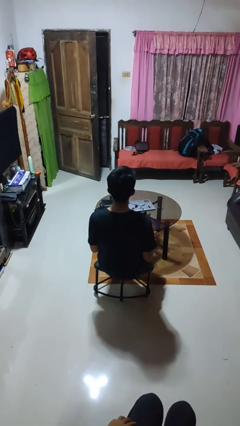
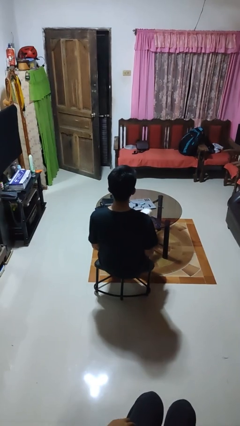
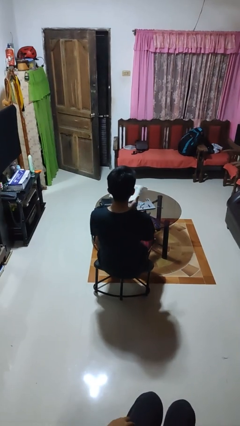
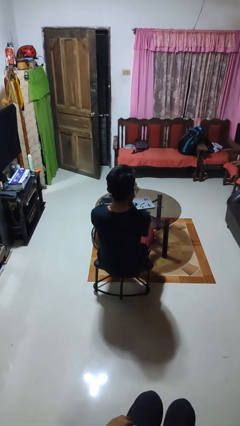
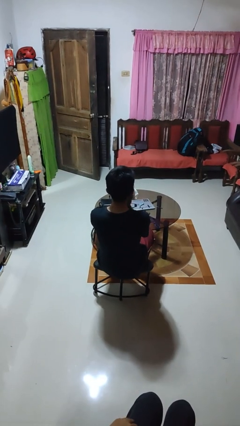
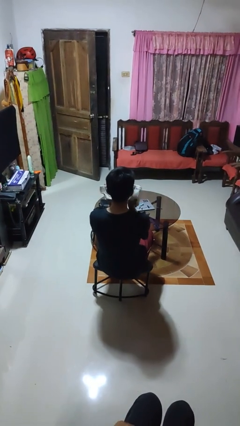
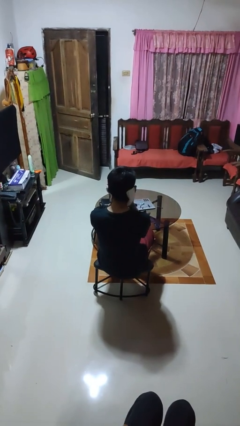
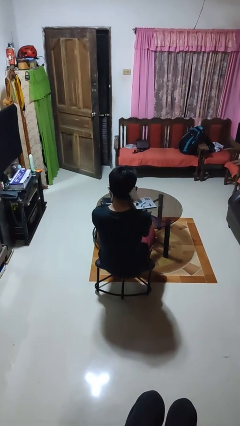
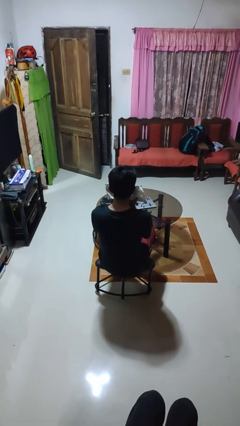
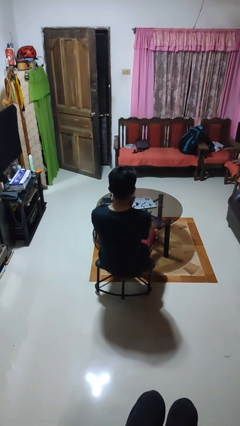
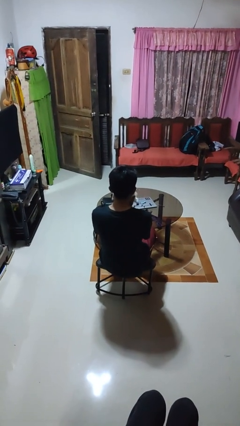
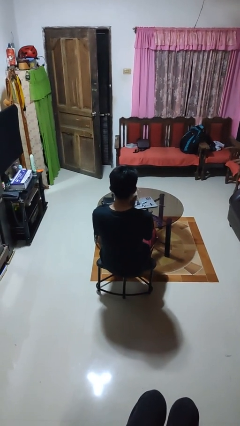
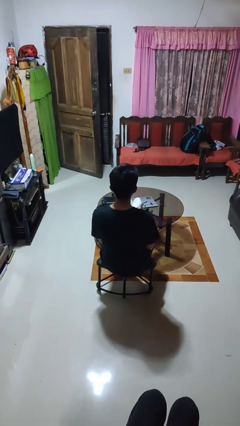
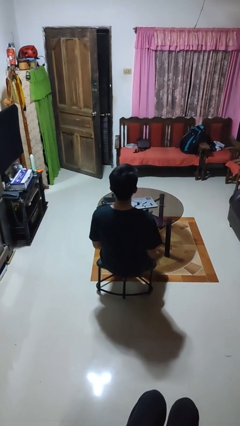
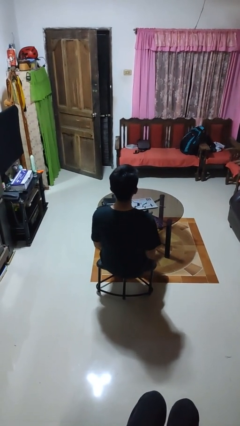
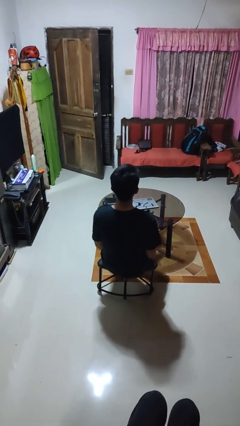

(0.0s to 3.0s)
person wipes mouth with napkin

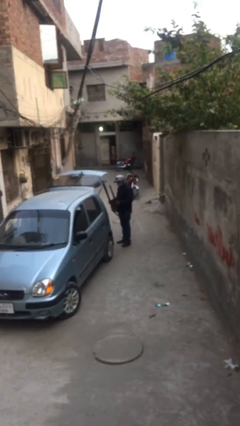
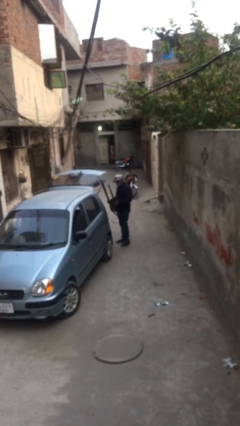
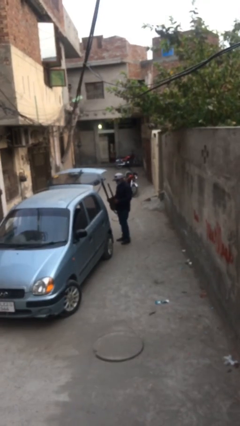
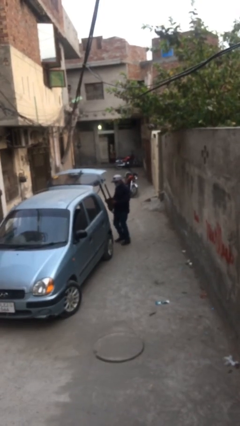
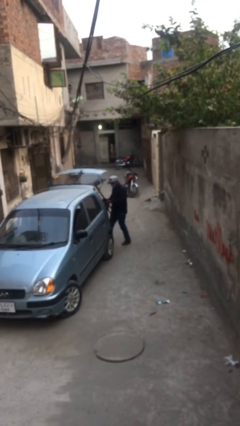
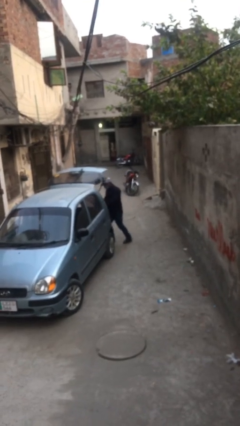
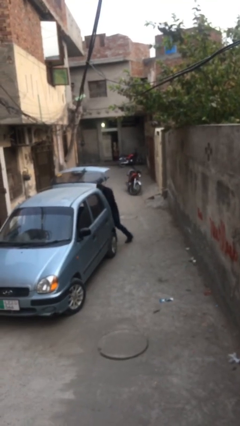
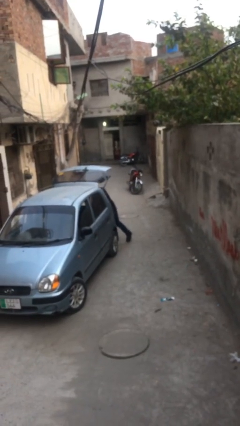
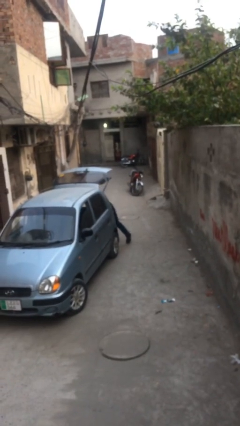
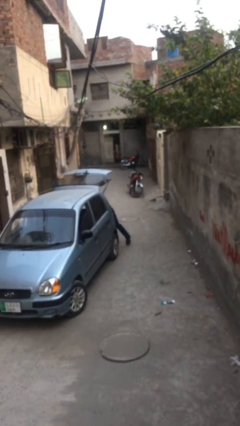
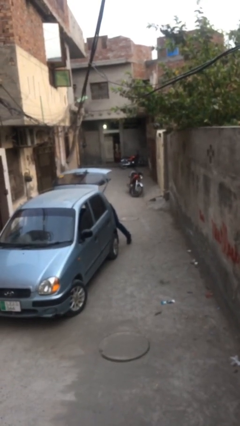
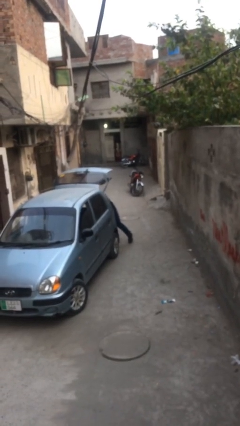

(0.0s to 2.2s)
person loads car

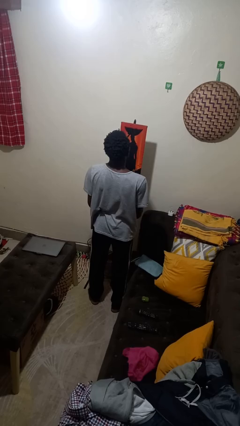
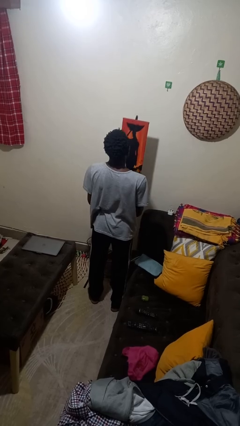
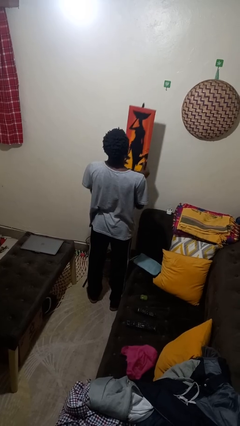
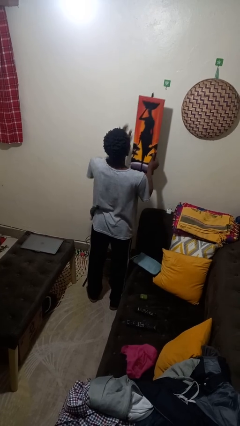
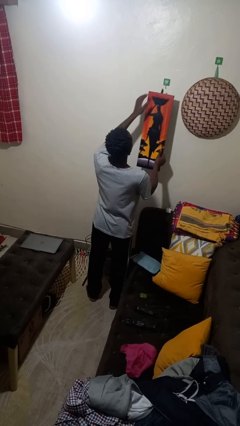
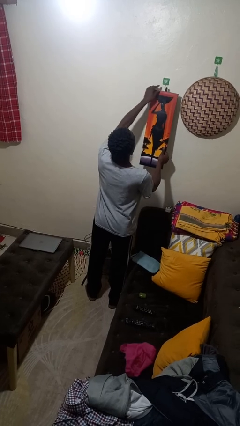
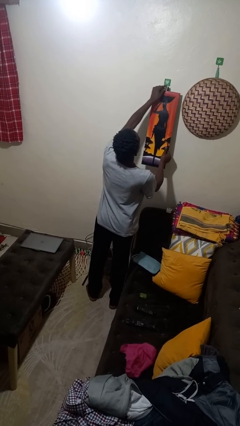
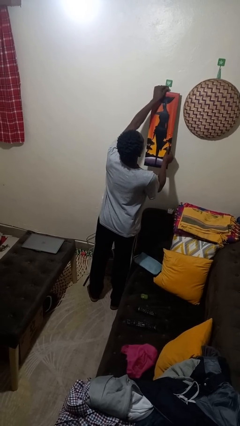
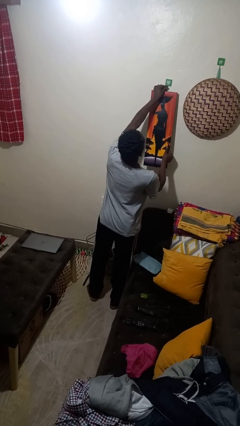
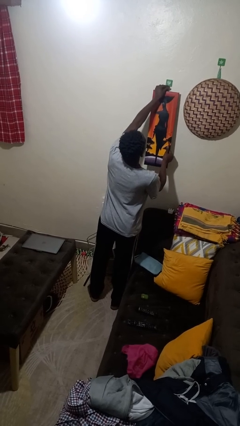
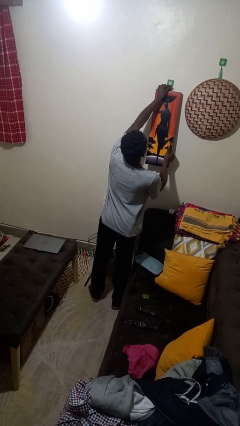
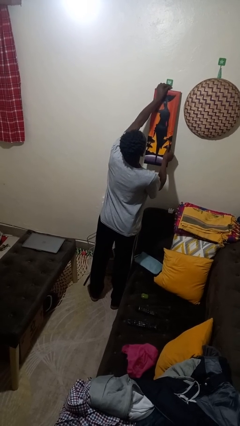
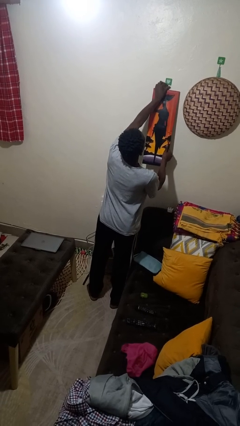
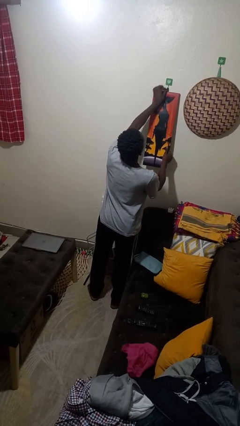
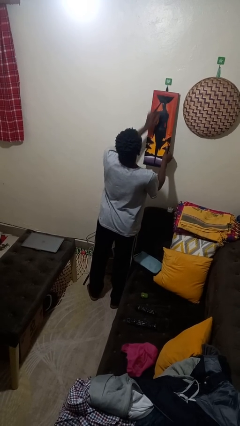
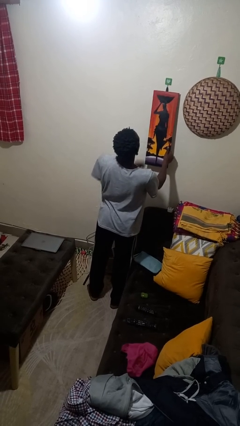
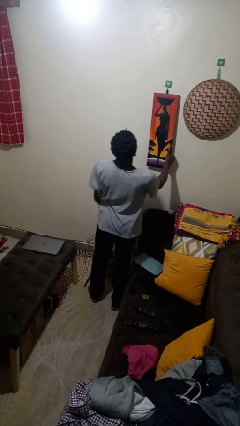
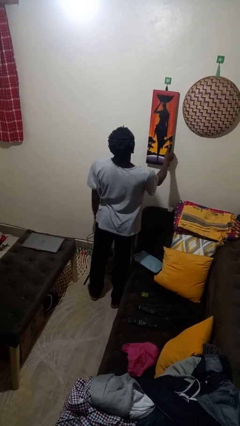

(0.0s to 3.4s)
person puts up picture frame

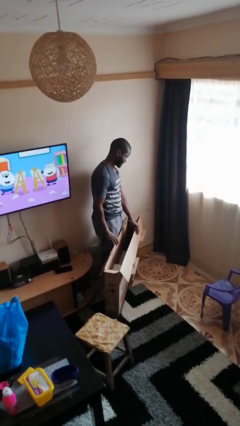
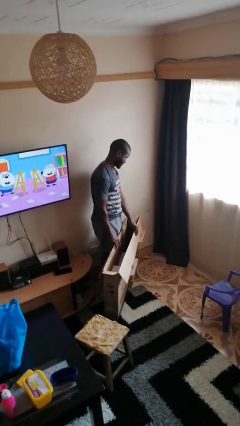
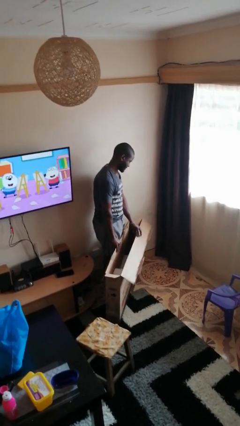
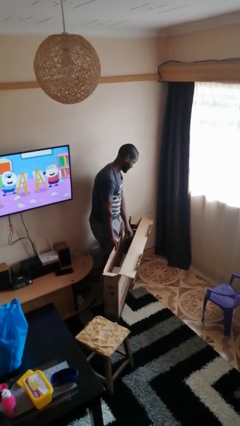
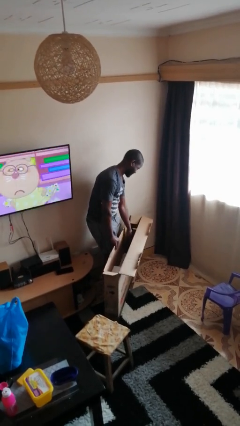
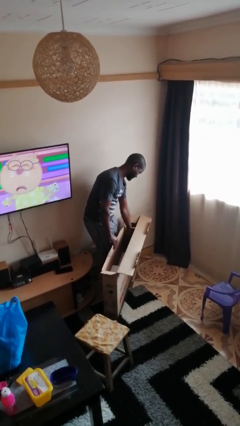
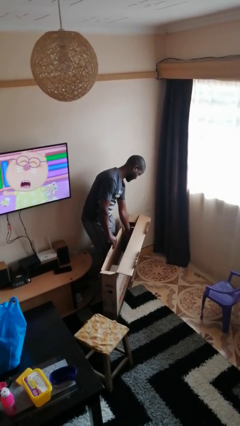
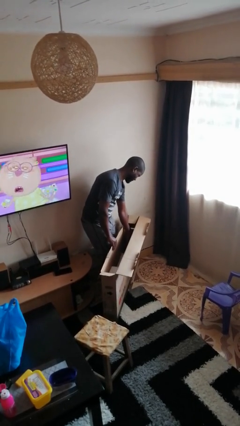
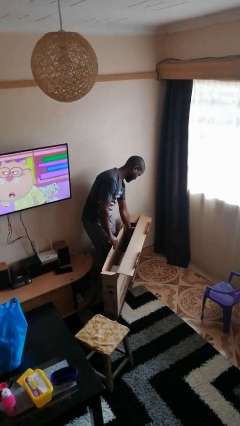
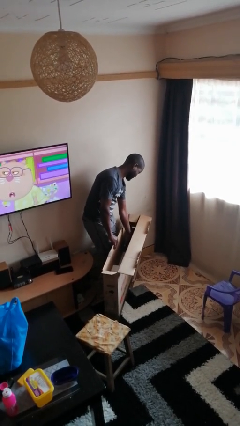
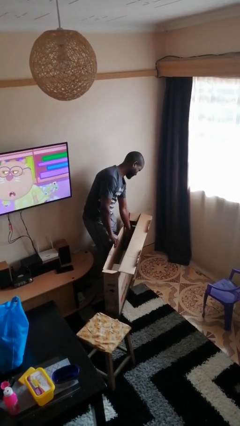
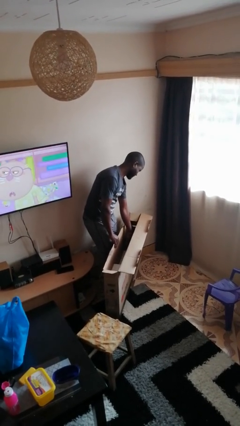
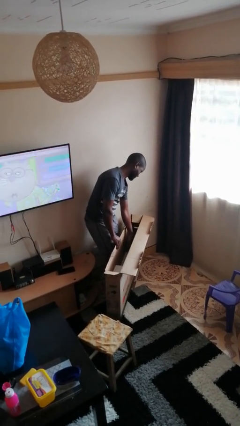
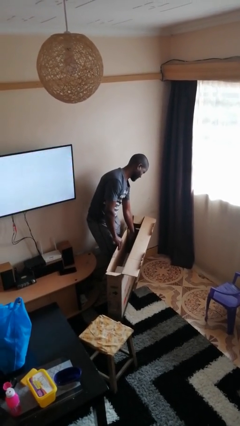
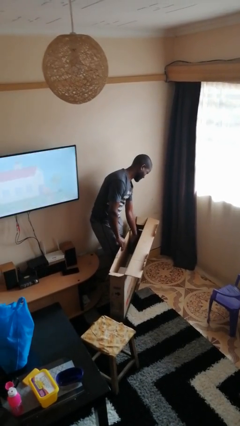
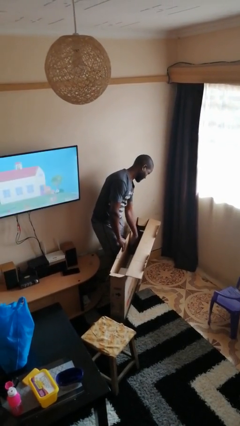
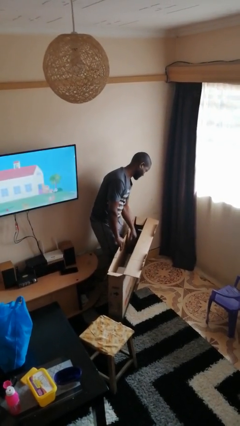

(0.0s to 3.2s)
person searches in box

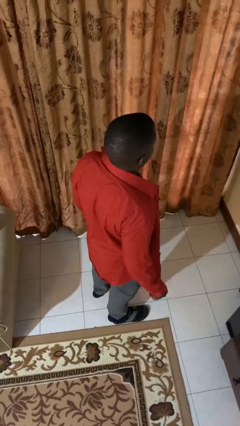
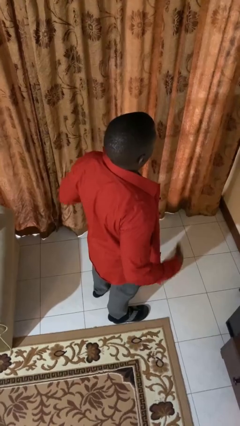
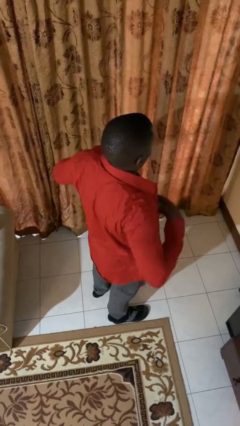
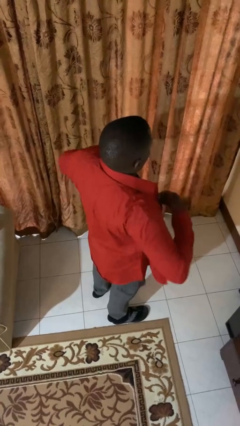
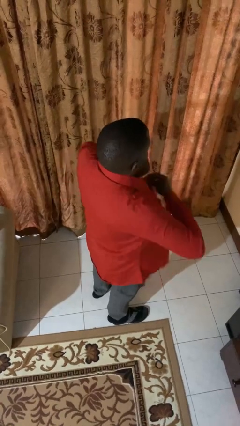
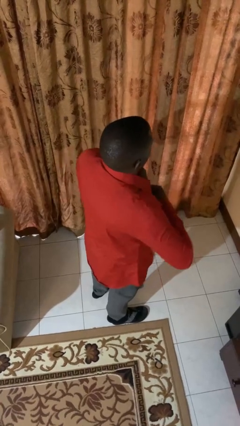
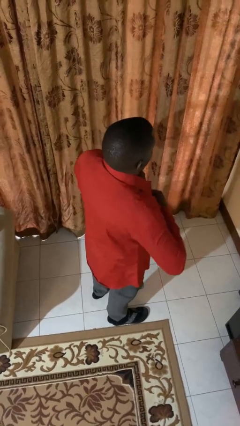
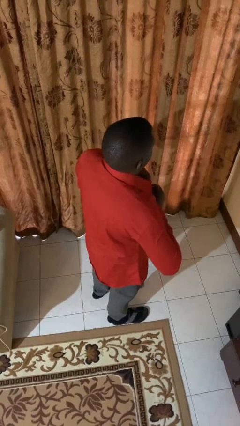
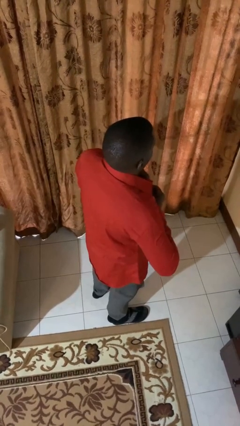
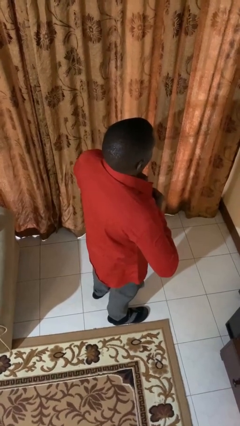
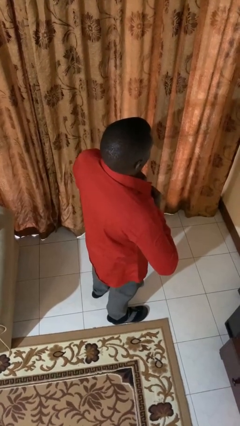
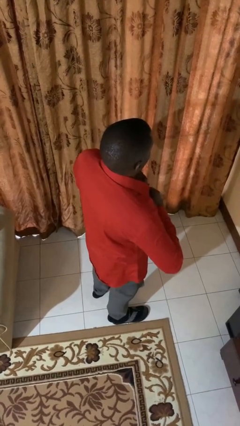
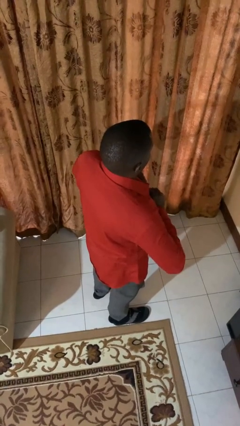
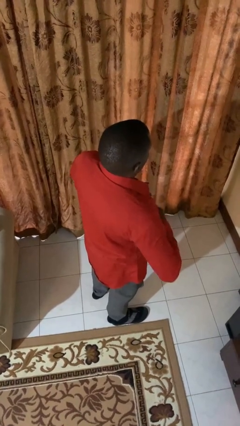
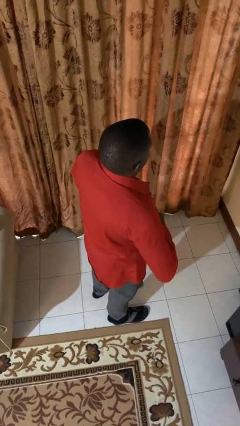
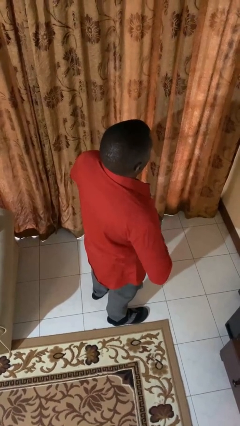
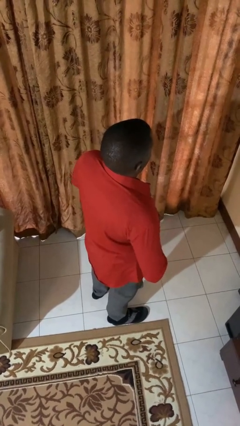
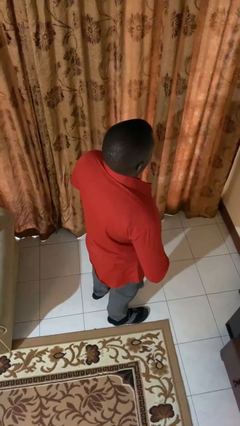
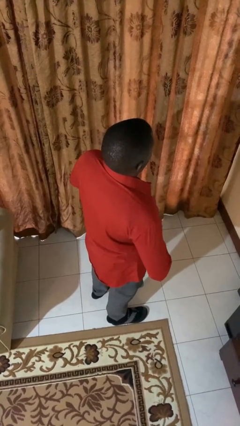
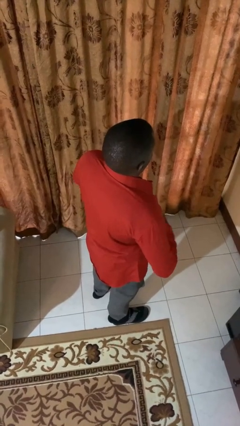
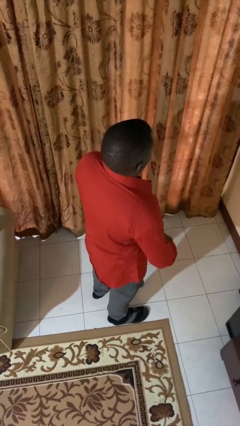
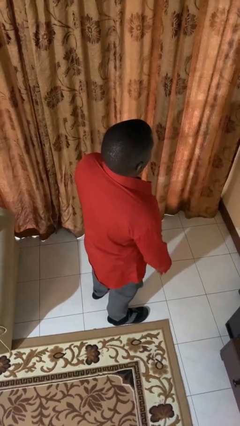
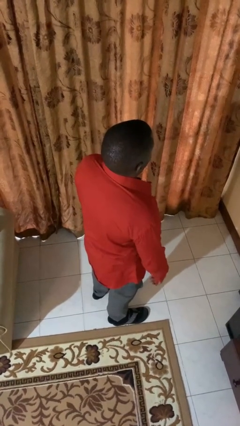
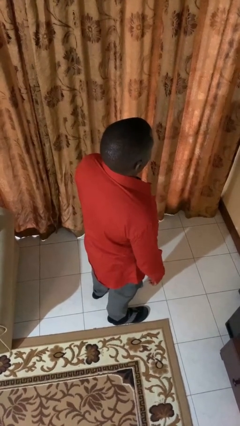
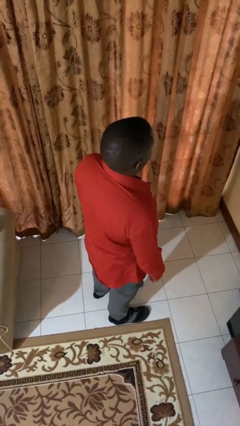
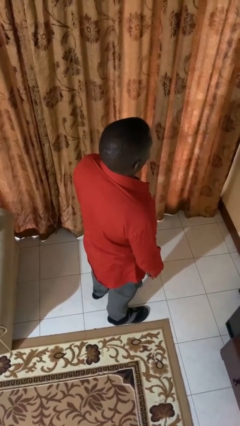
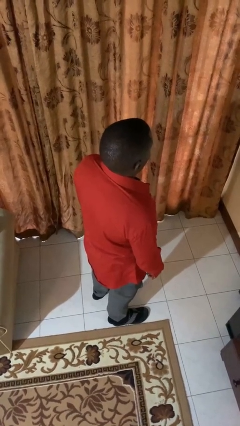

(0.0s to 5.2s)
person buttons shirt

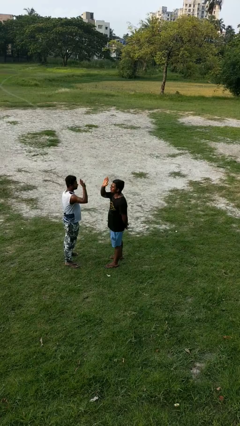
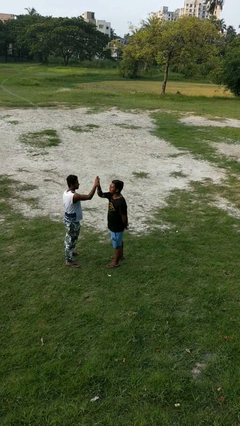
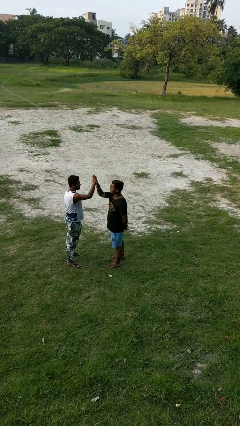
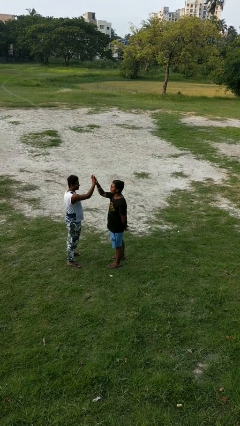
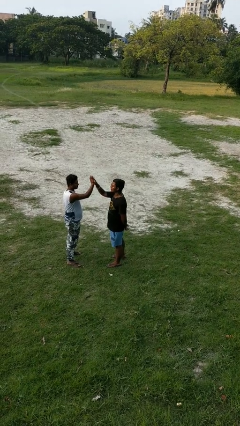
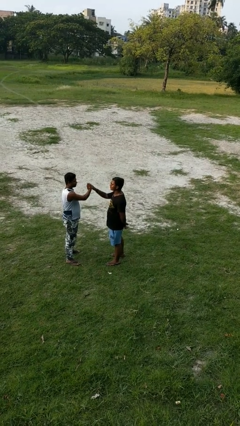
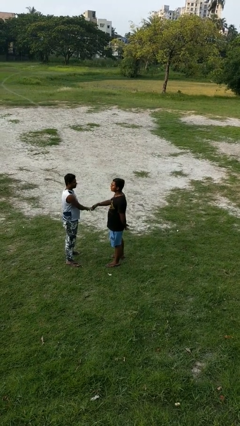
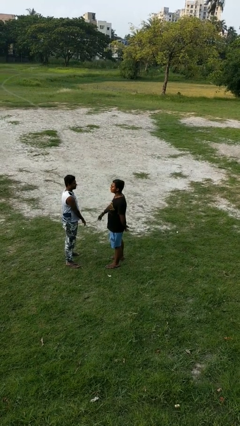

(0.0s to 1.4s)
person highfives hand
